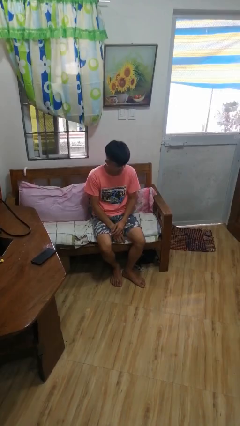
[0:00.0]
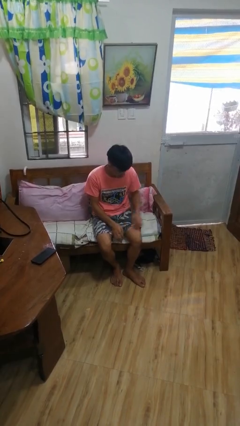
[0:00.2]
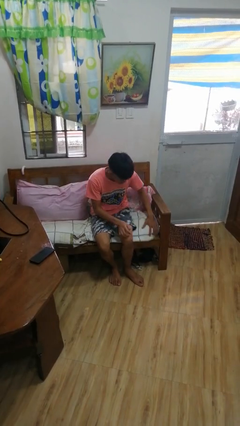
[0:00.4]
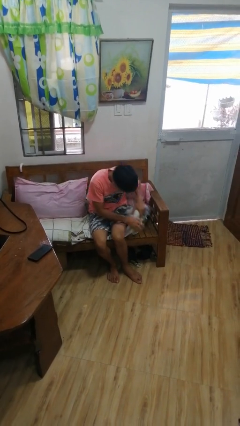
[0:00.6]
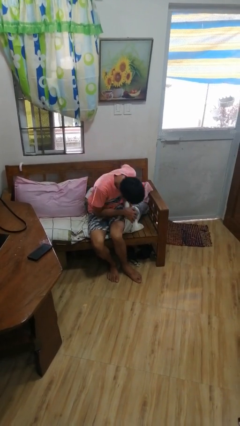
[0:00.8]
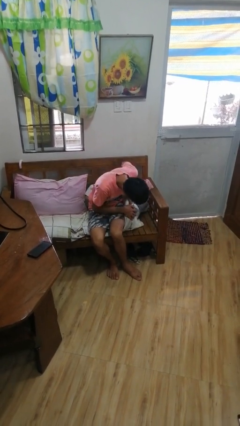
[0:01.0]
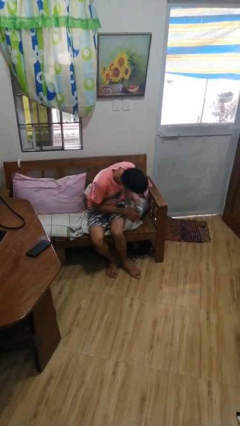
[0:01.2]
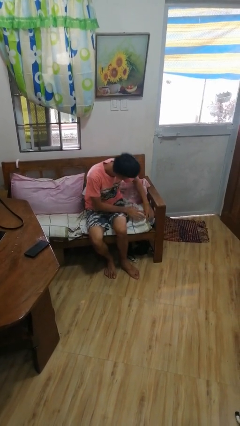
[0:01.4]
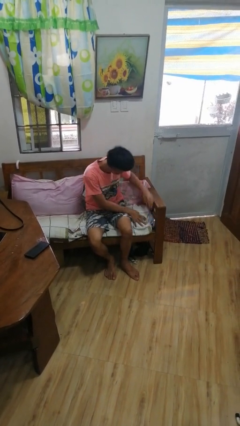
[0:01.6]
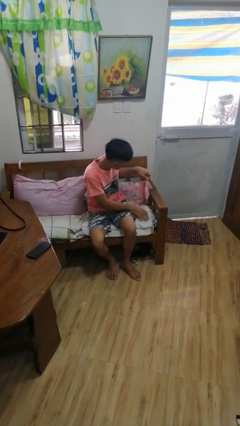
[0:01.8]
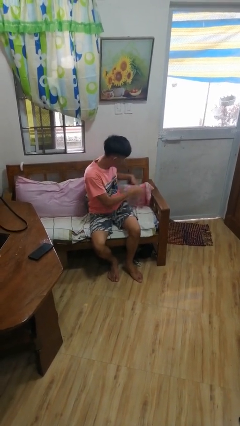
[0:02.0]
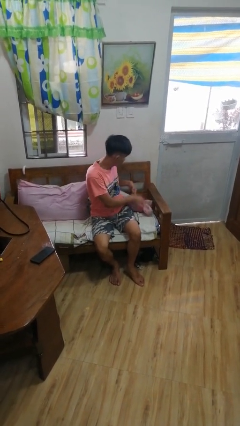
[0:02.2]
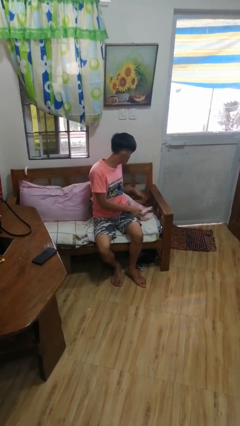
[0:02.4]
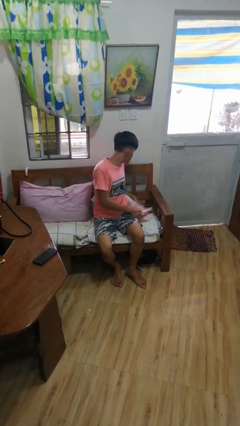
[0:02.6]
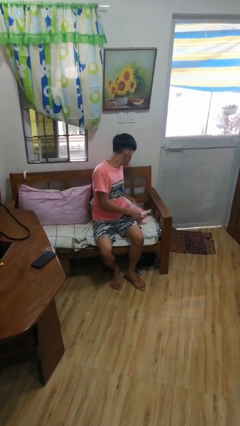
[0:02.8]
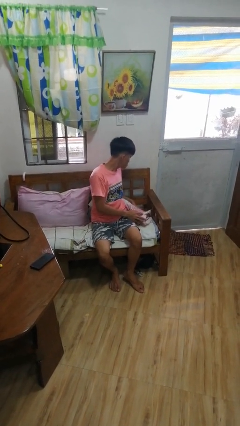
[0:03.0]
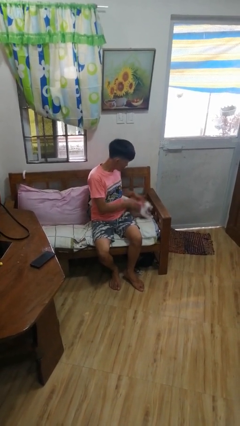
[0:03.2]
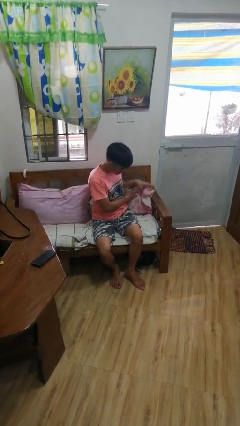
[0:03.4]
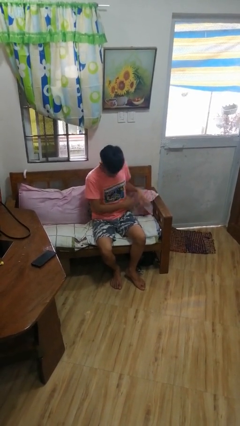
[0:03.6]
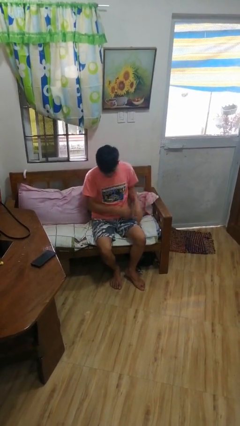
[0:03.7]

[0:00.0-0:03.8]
person searches in couch

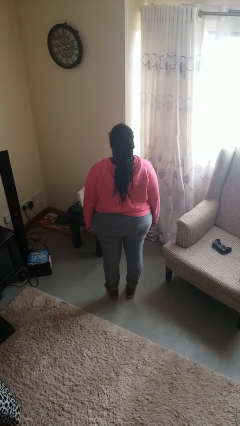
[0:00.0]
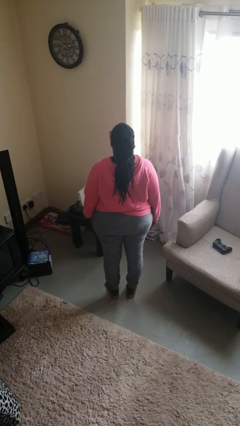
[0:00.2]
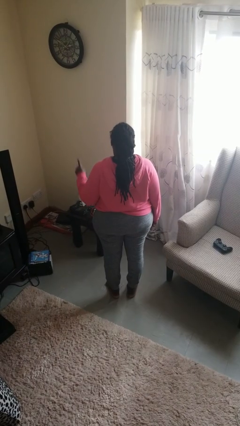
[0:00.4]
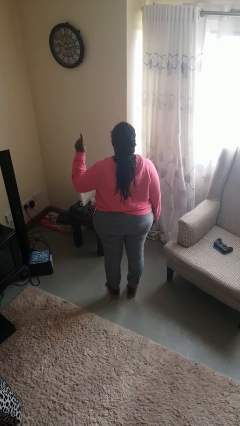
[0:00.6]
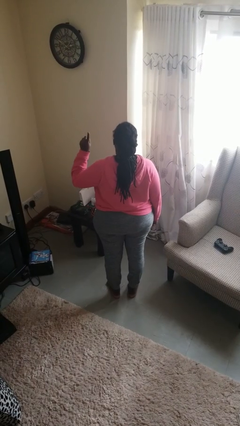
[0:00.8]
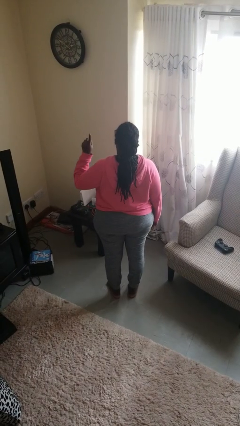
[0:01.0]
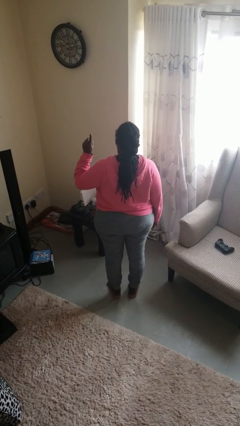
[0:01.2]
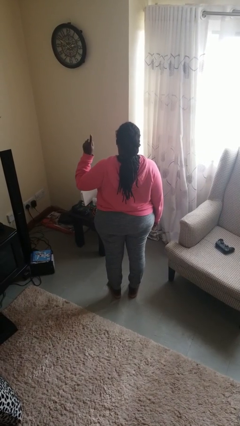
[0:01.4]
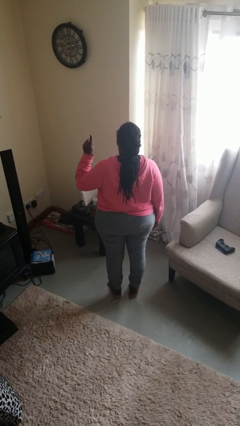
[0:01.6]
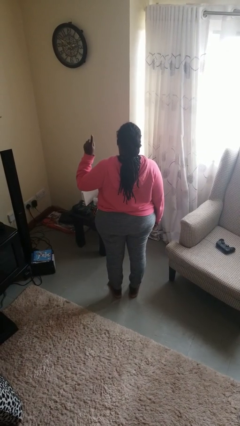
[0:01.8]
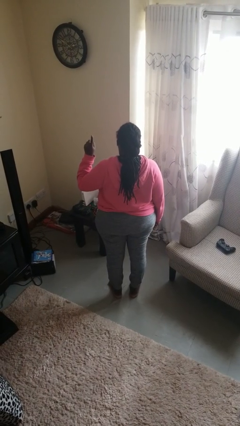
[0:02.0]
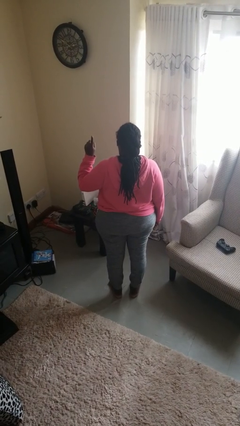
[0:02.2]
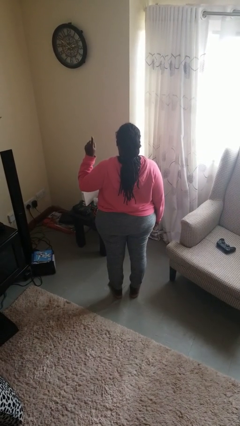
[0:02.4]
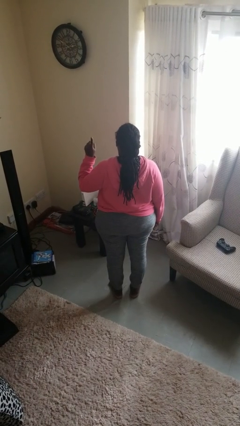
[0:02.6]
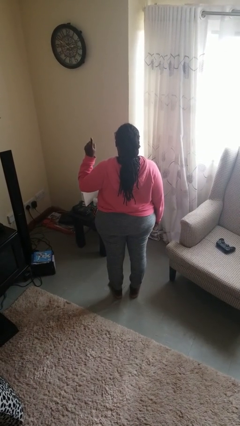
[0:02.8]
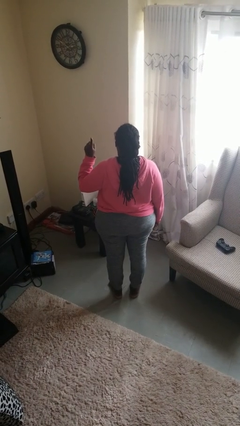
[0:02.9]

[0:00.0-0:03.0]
person gestures number one

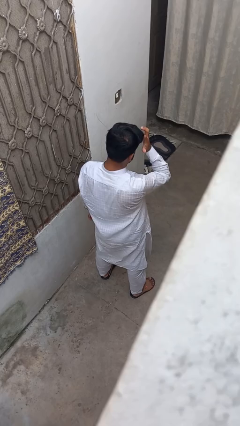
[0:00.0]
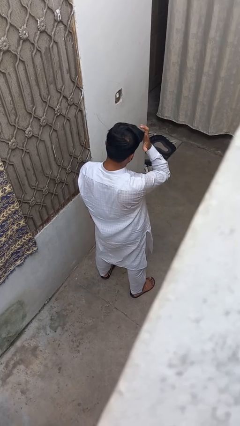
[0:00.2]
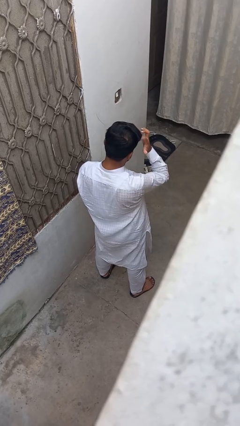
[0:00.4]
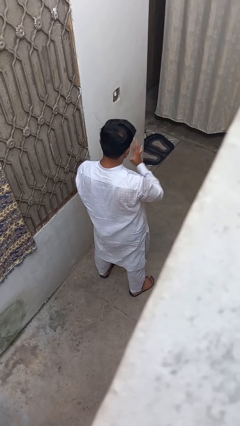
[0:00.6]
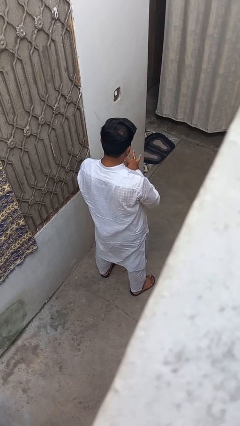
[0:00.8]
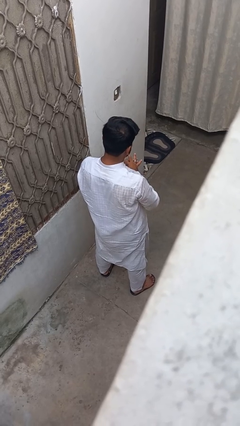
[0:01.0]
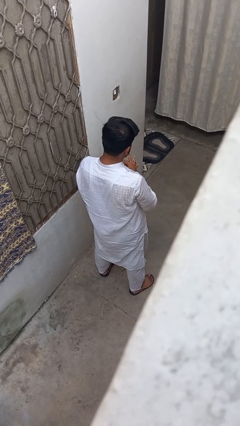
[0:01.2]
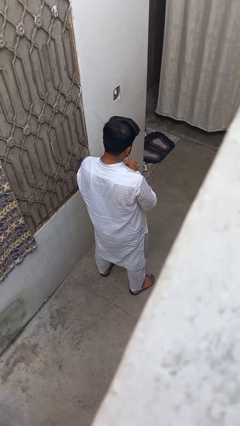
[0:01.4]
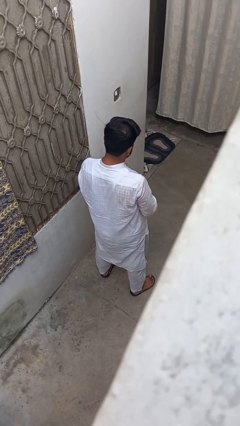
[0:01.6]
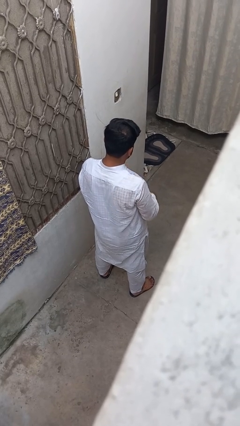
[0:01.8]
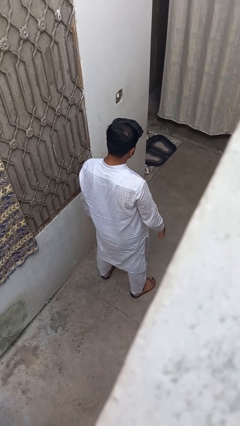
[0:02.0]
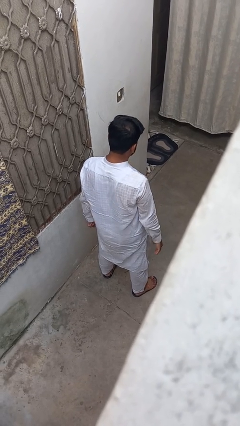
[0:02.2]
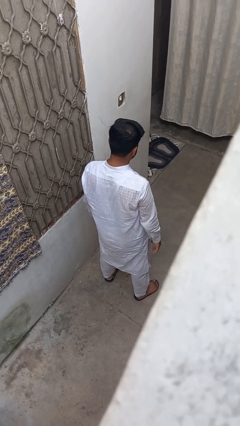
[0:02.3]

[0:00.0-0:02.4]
person takes off ring

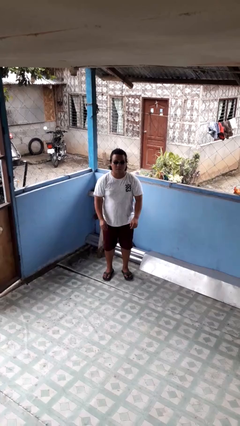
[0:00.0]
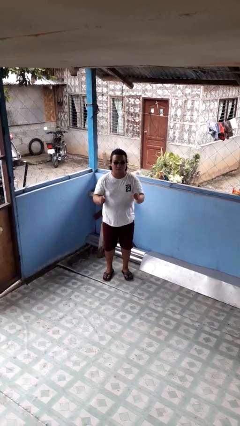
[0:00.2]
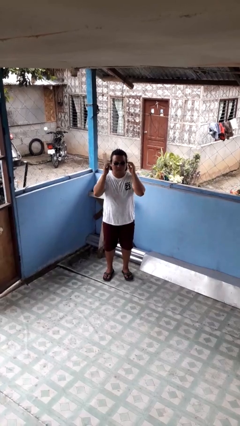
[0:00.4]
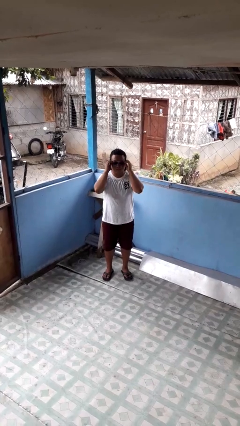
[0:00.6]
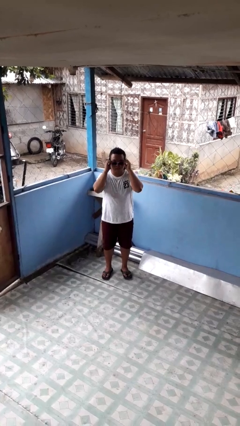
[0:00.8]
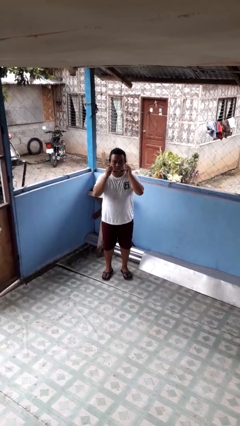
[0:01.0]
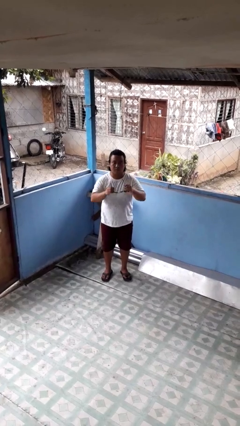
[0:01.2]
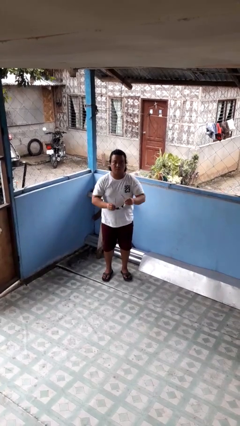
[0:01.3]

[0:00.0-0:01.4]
person takes off sunglasses

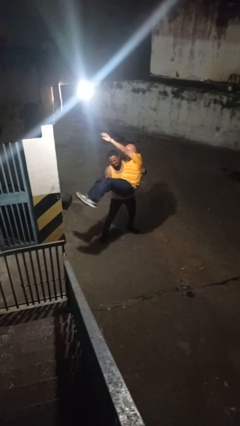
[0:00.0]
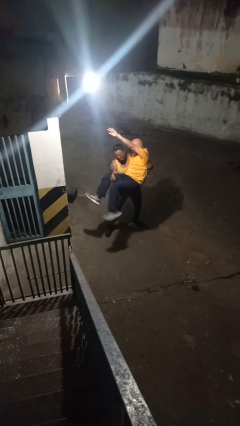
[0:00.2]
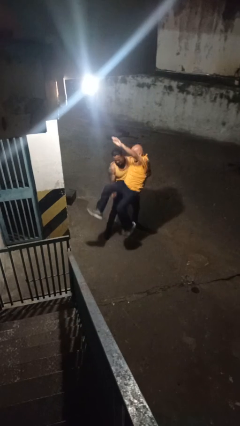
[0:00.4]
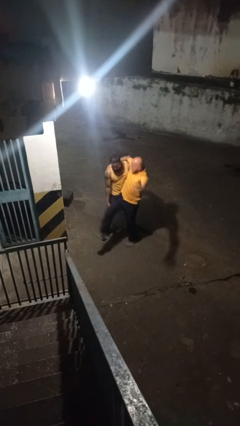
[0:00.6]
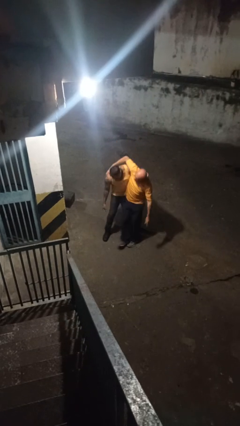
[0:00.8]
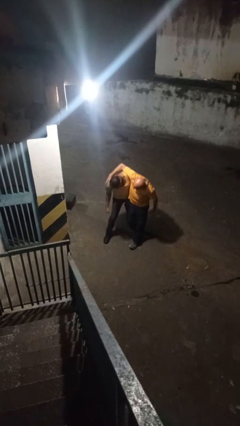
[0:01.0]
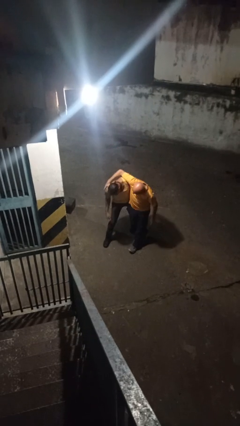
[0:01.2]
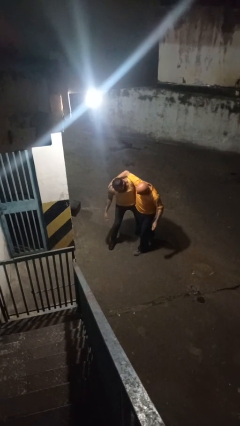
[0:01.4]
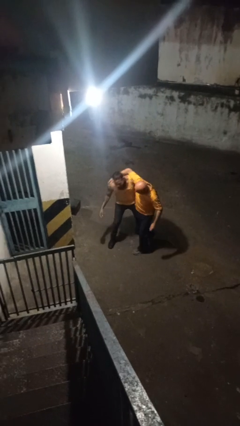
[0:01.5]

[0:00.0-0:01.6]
person puts down person

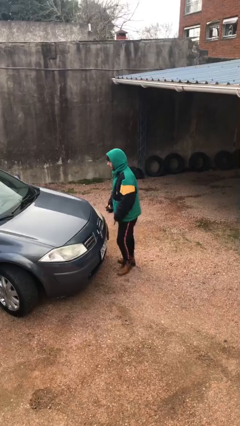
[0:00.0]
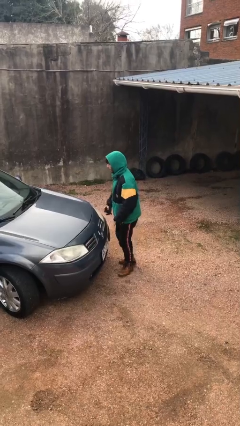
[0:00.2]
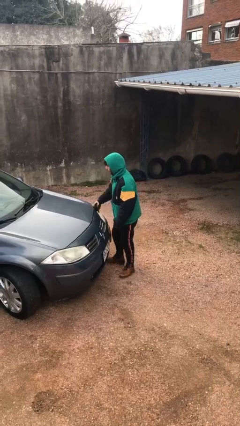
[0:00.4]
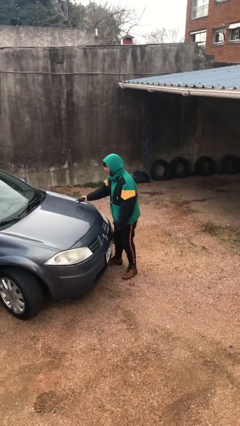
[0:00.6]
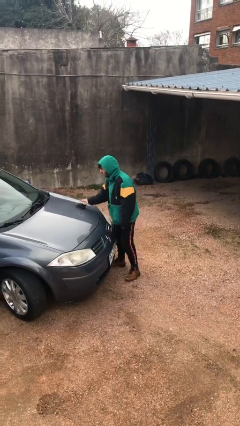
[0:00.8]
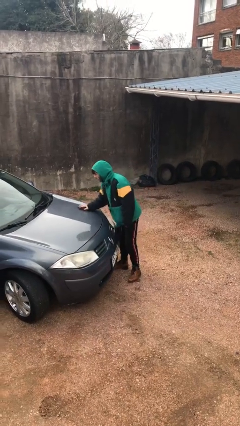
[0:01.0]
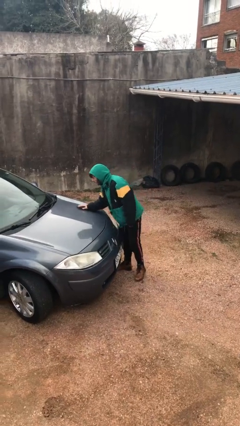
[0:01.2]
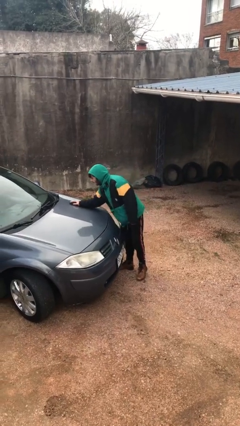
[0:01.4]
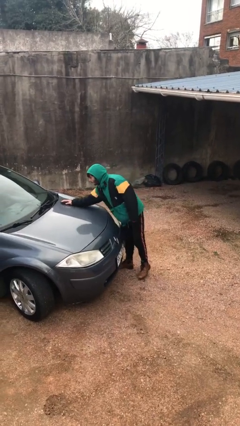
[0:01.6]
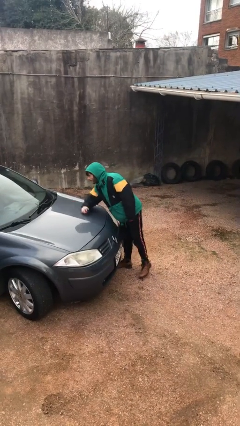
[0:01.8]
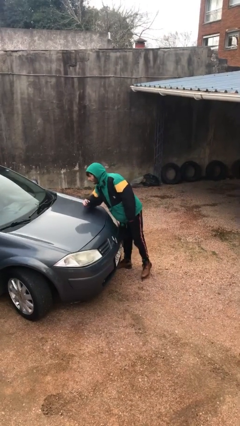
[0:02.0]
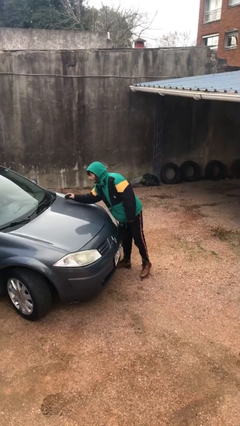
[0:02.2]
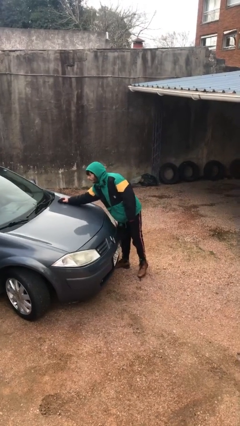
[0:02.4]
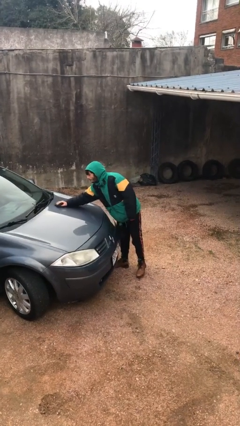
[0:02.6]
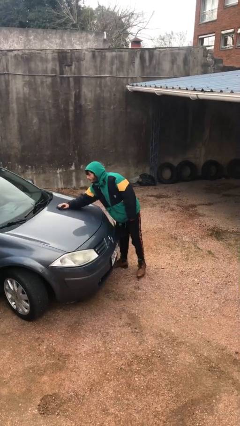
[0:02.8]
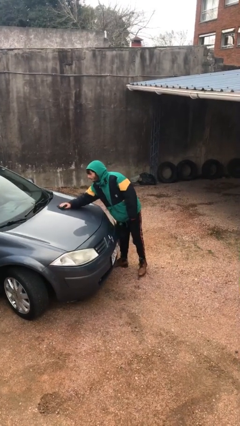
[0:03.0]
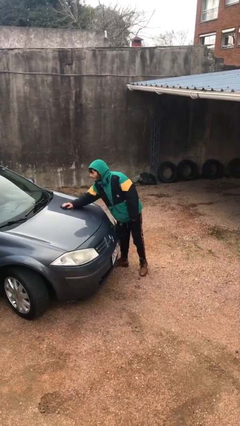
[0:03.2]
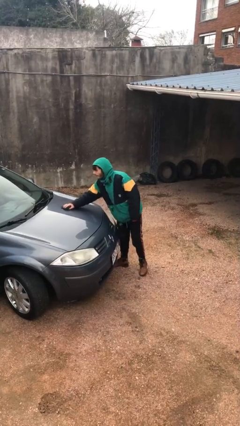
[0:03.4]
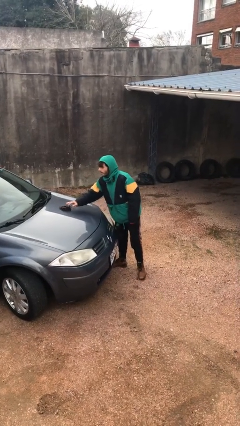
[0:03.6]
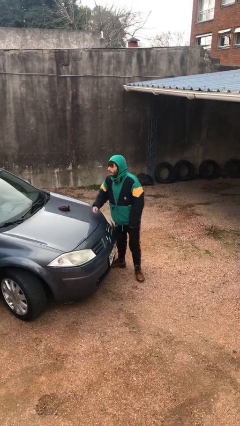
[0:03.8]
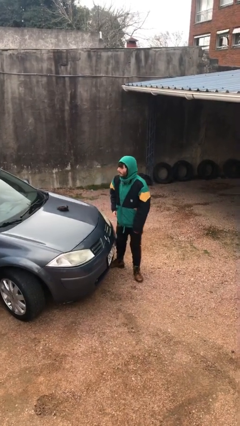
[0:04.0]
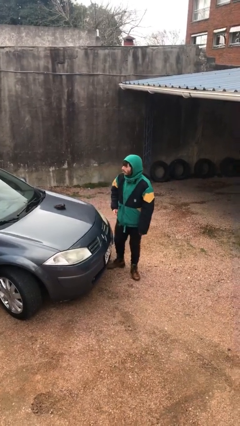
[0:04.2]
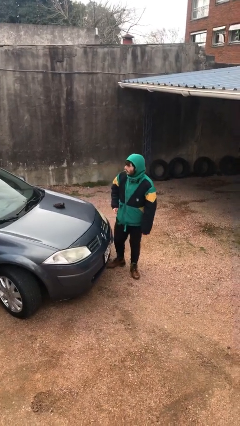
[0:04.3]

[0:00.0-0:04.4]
person polishes car with rag

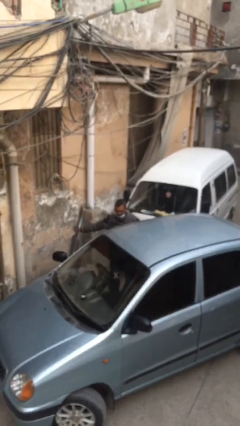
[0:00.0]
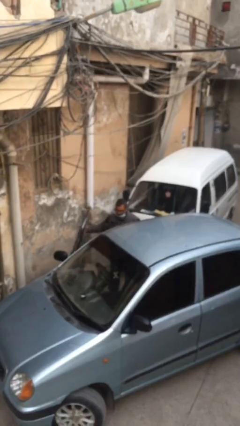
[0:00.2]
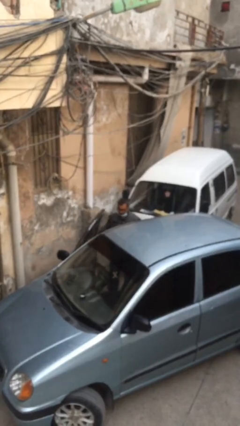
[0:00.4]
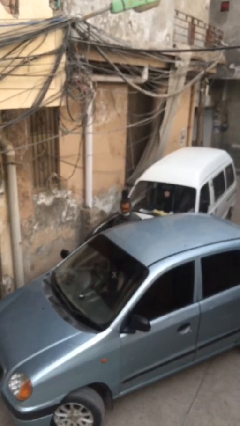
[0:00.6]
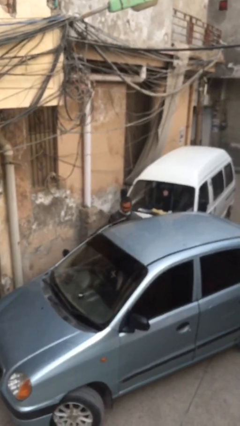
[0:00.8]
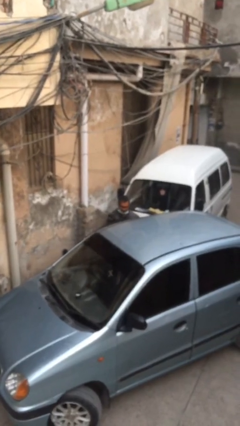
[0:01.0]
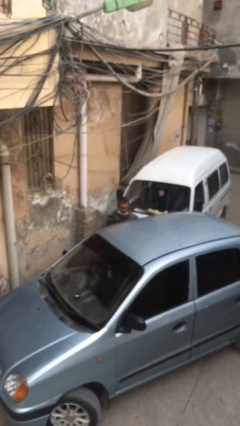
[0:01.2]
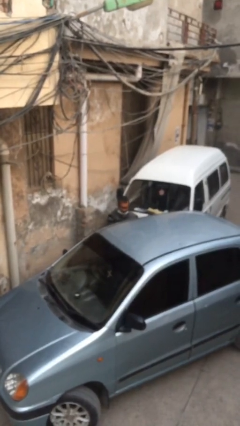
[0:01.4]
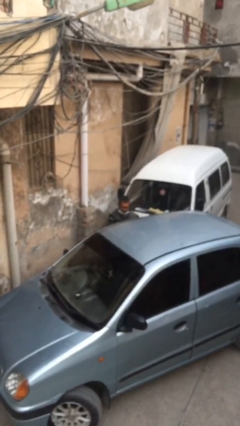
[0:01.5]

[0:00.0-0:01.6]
person closes car door
